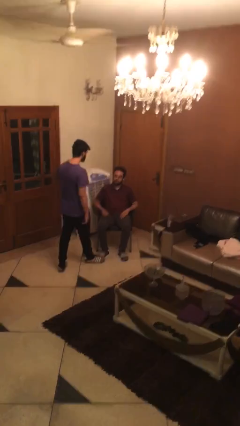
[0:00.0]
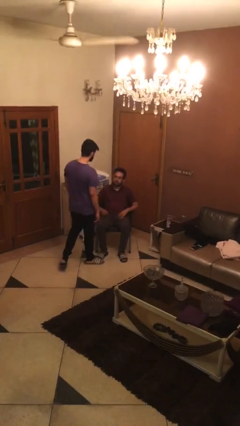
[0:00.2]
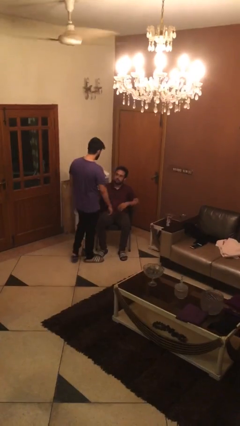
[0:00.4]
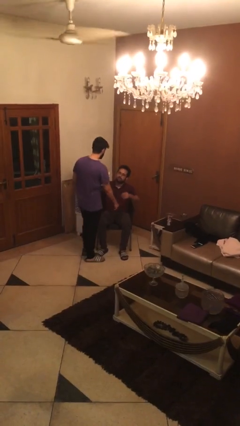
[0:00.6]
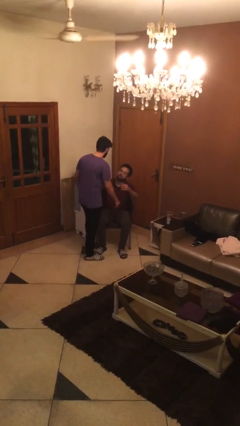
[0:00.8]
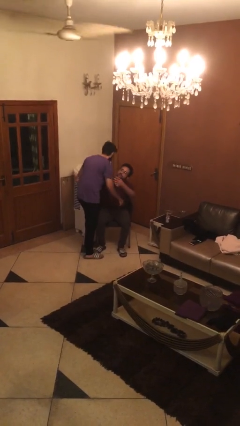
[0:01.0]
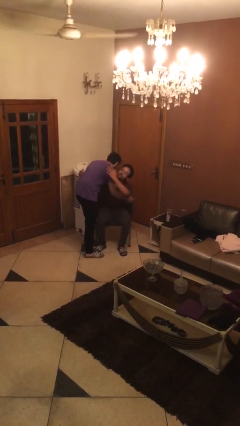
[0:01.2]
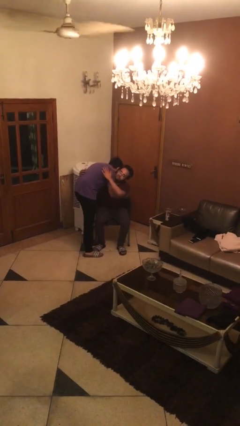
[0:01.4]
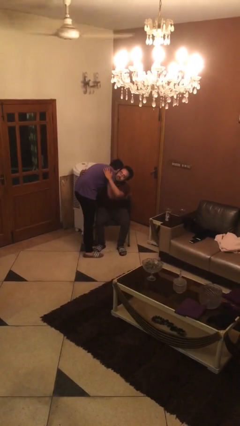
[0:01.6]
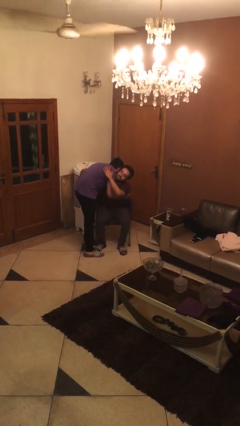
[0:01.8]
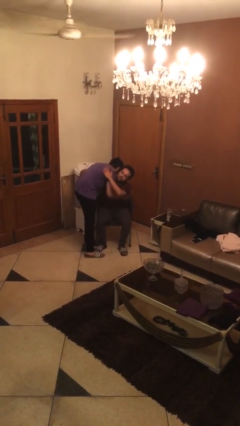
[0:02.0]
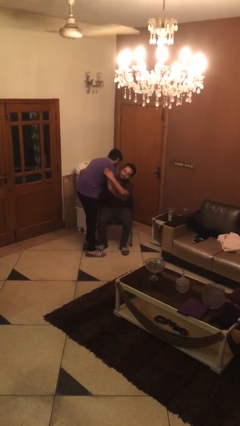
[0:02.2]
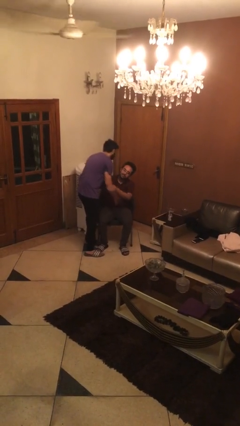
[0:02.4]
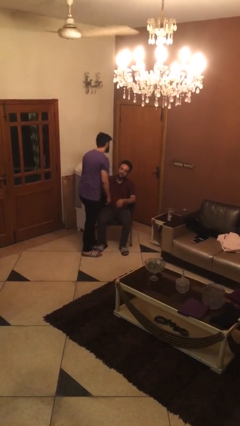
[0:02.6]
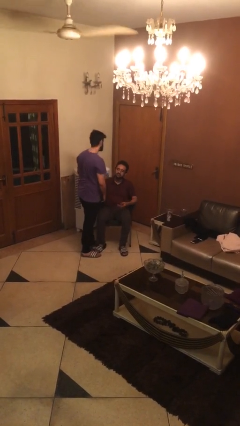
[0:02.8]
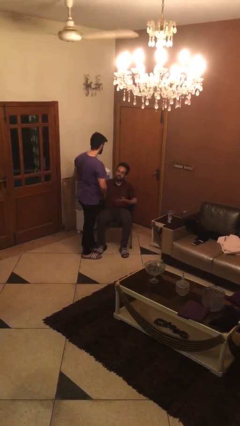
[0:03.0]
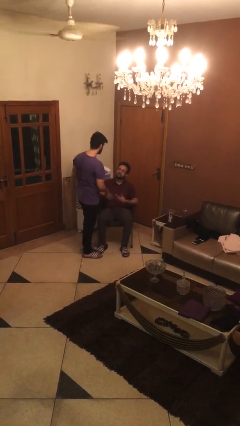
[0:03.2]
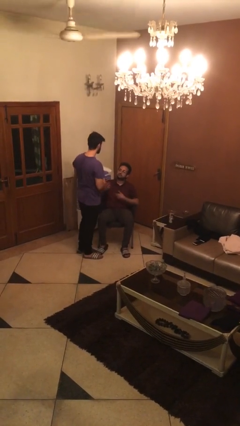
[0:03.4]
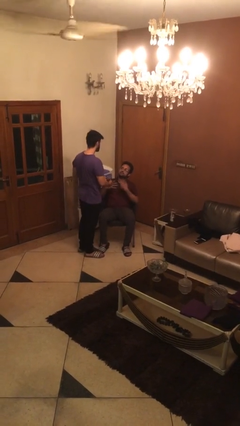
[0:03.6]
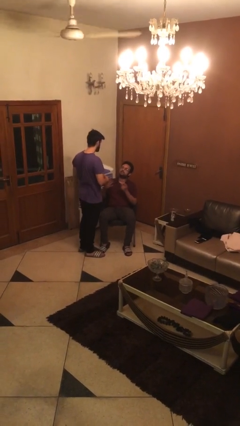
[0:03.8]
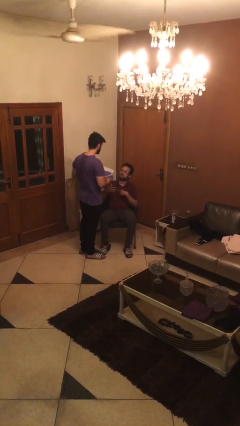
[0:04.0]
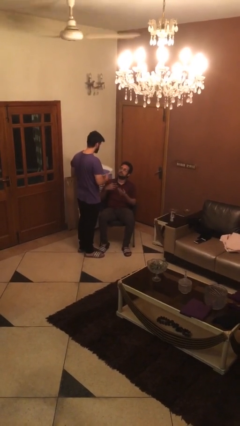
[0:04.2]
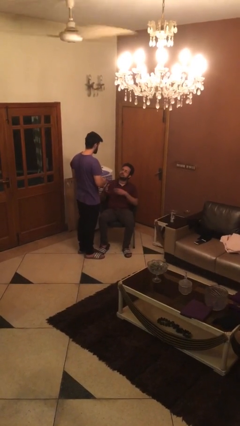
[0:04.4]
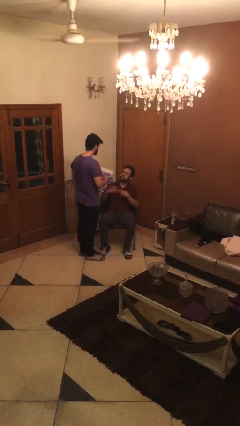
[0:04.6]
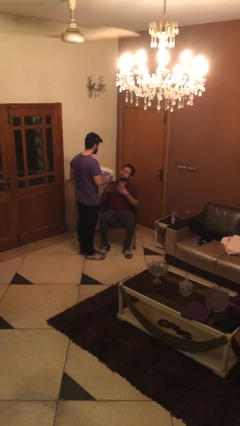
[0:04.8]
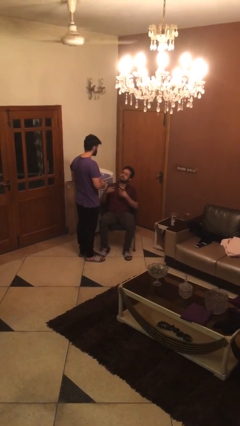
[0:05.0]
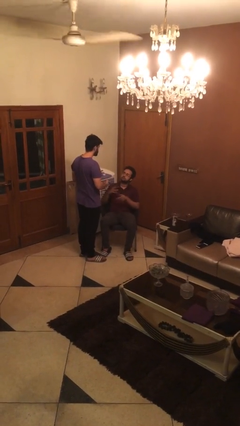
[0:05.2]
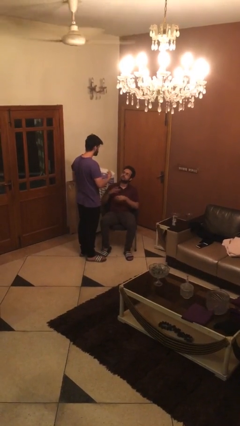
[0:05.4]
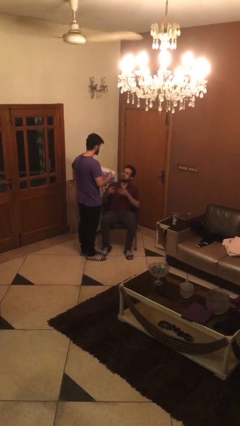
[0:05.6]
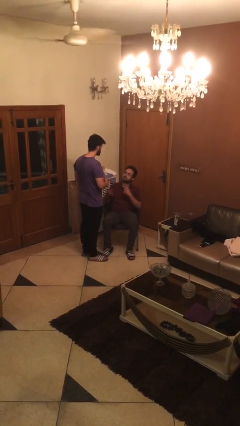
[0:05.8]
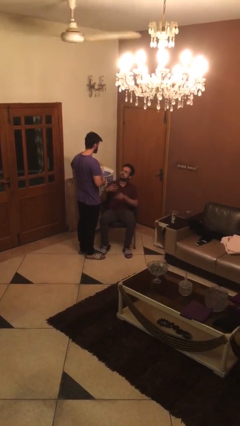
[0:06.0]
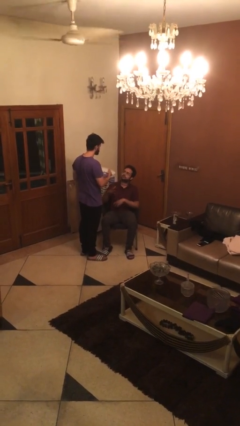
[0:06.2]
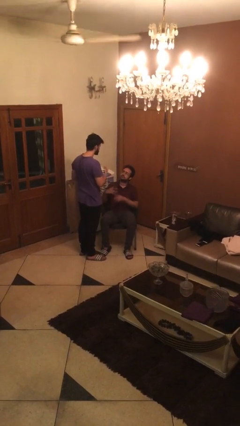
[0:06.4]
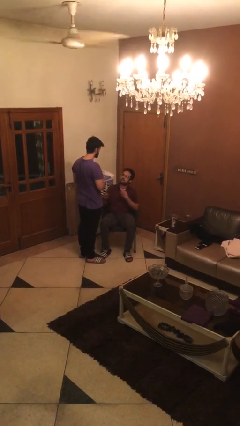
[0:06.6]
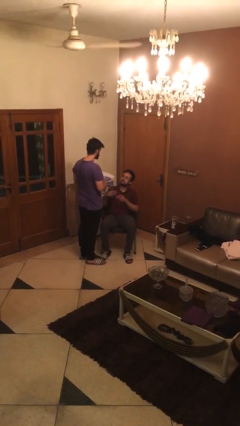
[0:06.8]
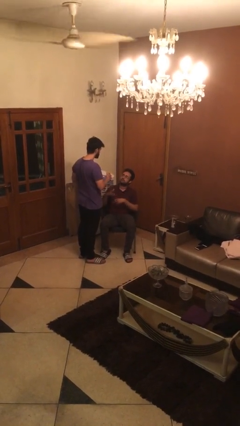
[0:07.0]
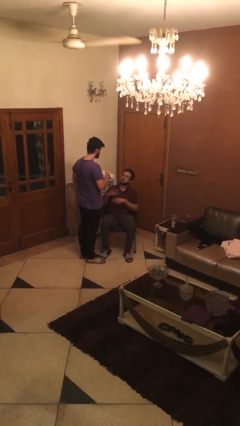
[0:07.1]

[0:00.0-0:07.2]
person embraces person

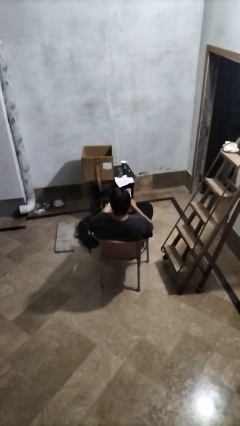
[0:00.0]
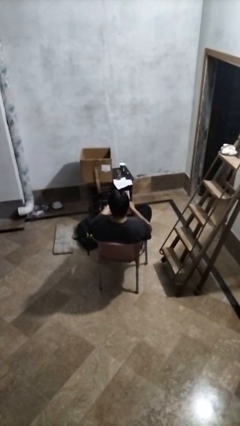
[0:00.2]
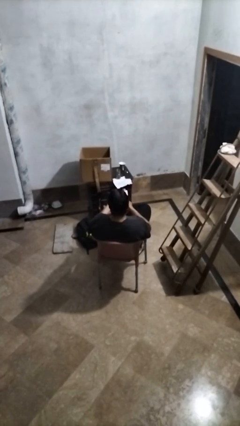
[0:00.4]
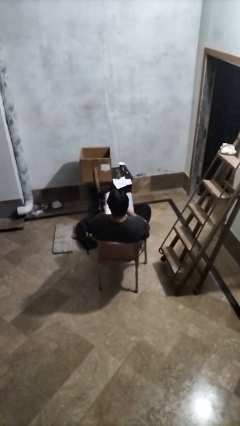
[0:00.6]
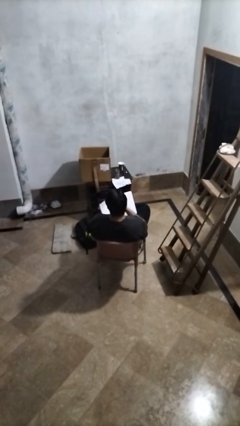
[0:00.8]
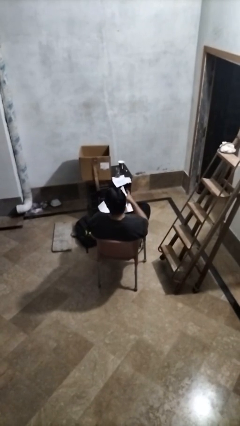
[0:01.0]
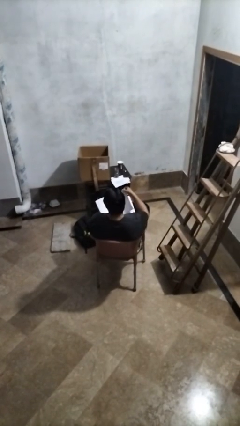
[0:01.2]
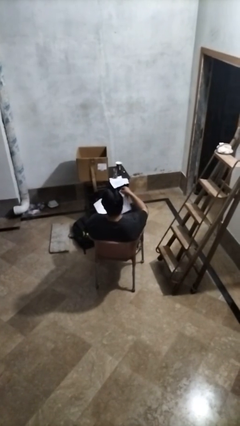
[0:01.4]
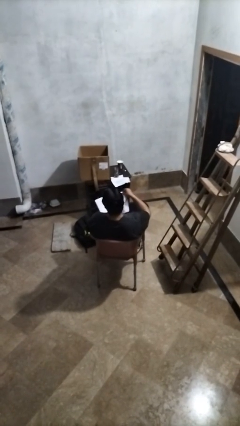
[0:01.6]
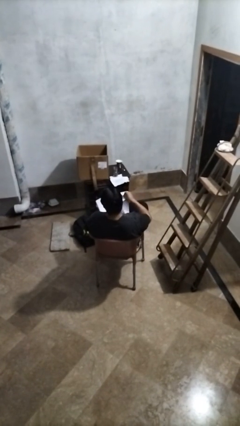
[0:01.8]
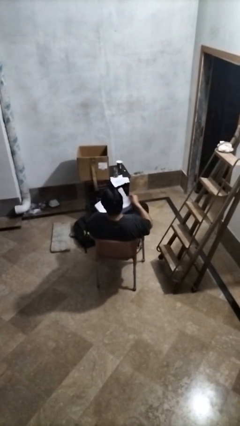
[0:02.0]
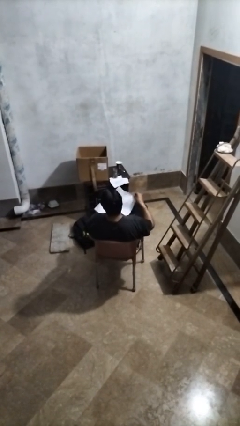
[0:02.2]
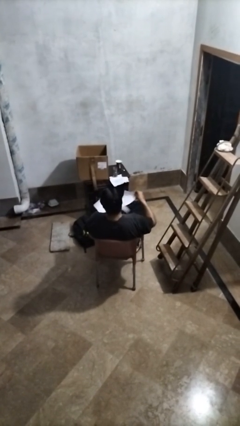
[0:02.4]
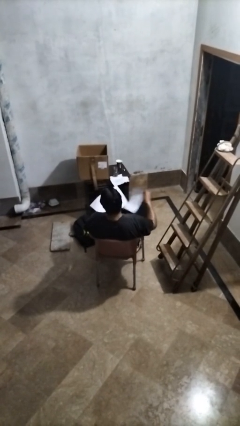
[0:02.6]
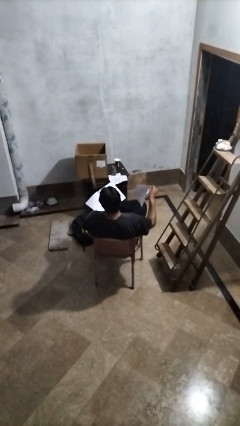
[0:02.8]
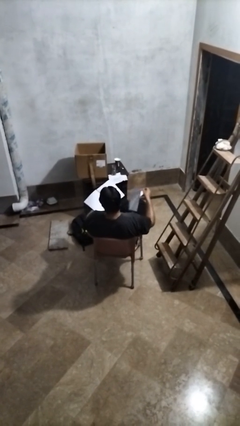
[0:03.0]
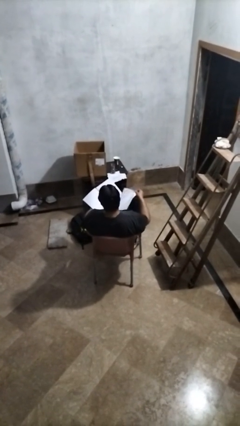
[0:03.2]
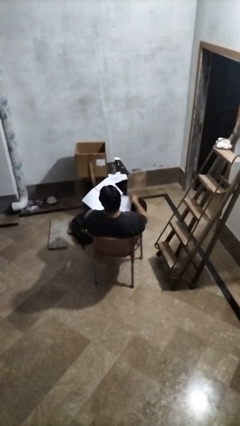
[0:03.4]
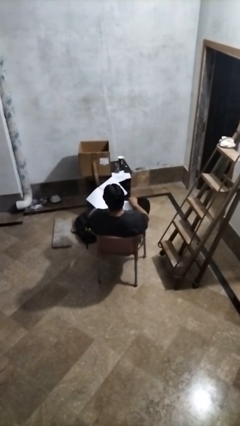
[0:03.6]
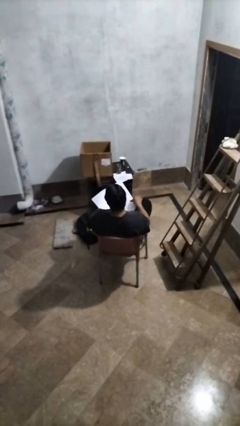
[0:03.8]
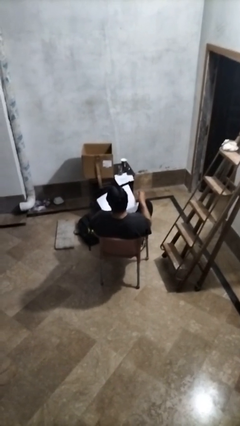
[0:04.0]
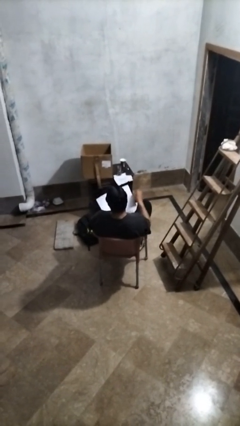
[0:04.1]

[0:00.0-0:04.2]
person tears paper

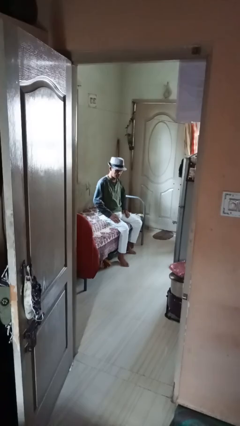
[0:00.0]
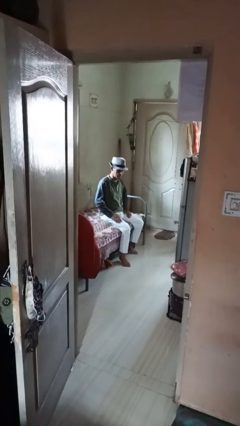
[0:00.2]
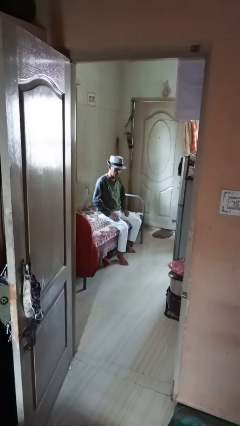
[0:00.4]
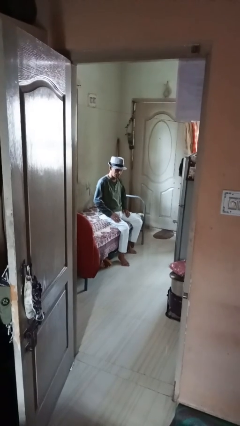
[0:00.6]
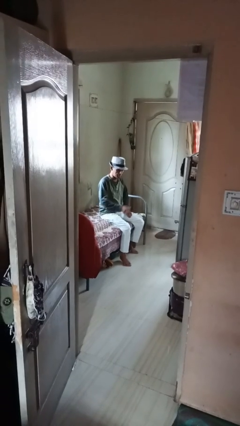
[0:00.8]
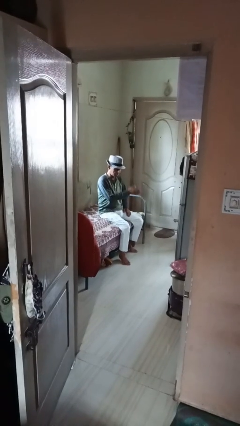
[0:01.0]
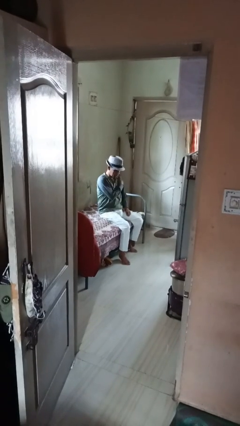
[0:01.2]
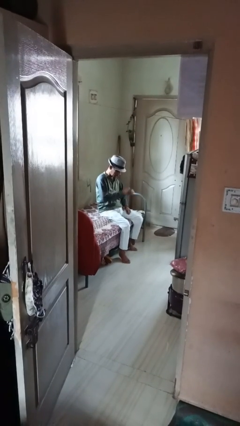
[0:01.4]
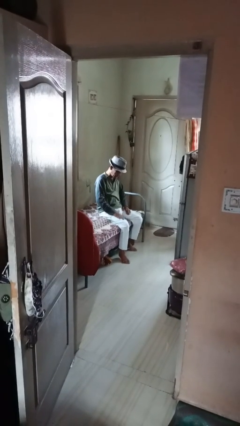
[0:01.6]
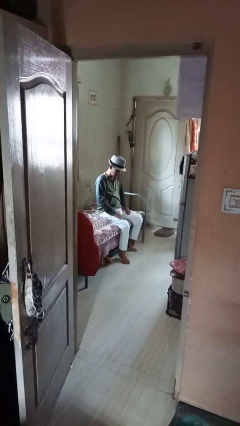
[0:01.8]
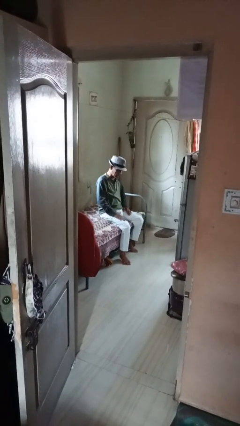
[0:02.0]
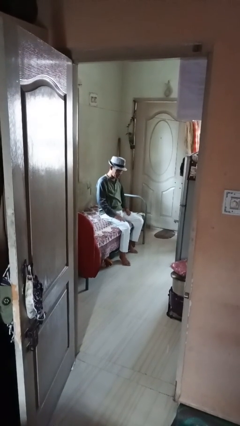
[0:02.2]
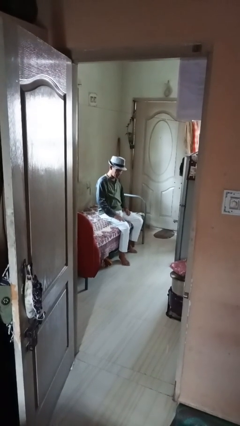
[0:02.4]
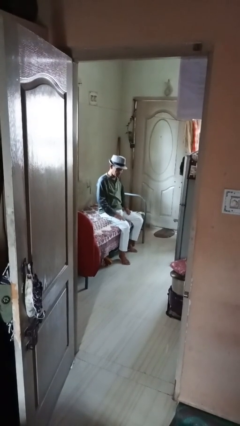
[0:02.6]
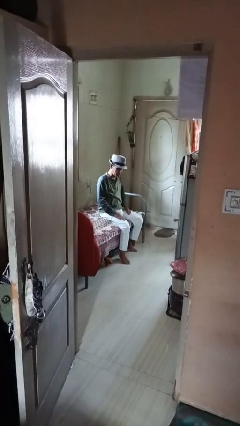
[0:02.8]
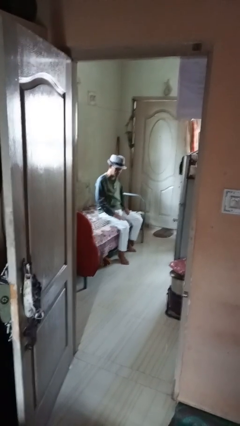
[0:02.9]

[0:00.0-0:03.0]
person swats bug

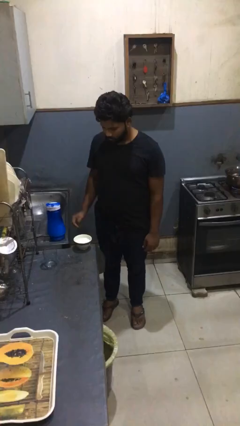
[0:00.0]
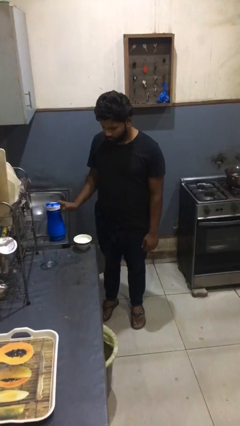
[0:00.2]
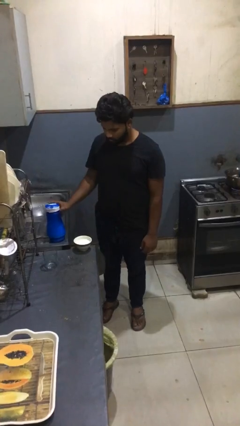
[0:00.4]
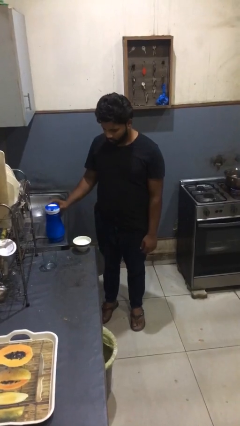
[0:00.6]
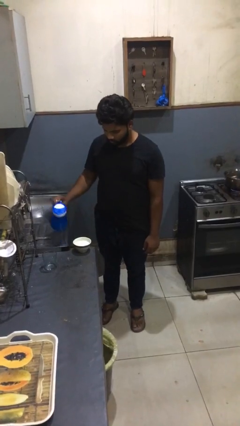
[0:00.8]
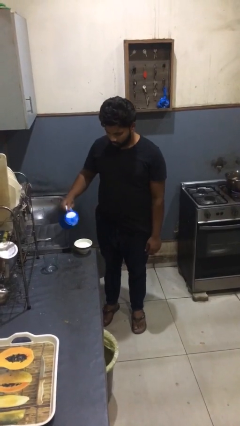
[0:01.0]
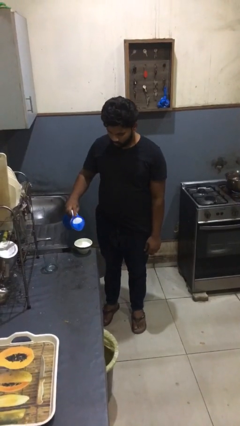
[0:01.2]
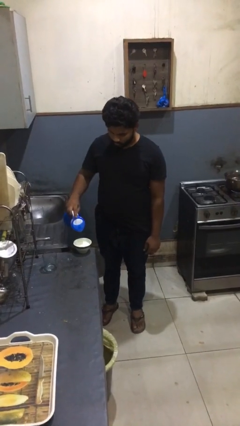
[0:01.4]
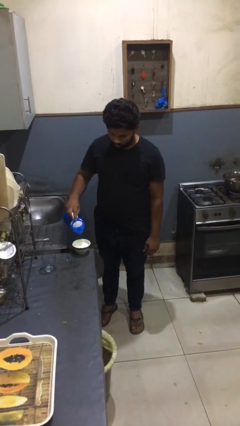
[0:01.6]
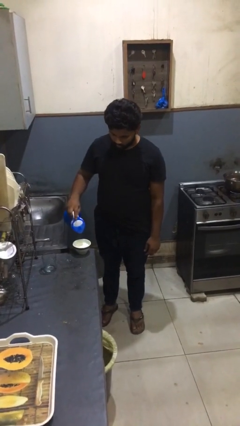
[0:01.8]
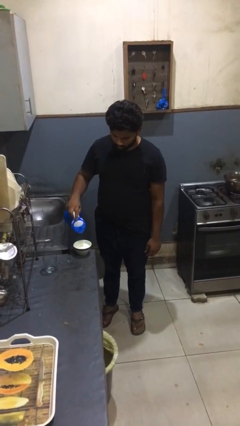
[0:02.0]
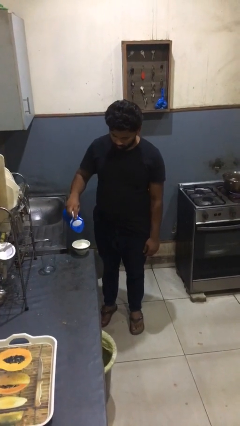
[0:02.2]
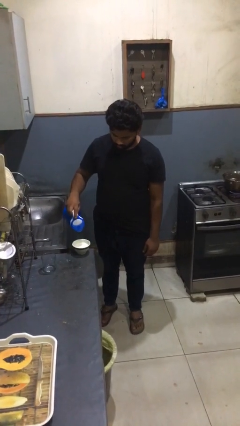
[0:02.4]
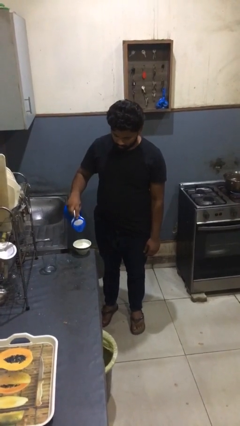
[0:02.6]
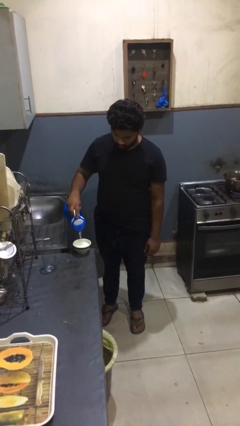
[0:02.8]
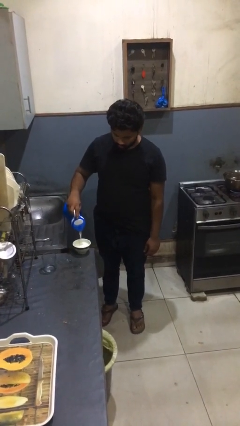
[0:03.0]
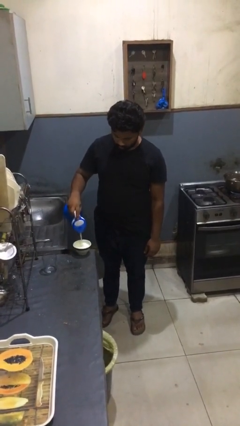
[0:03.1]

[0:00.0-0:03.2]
person pours into bowl

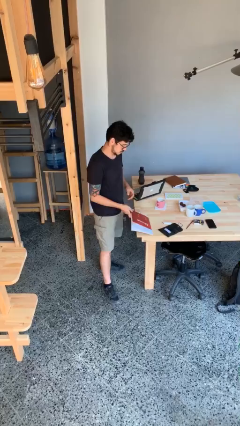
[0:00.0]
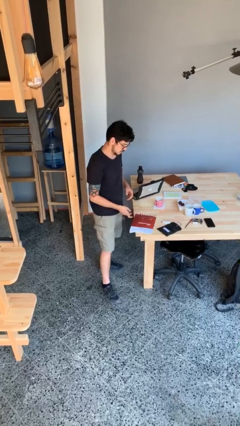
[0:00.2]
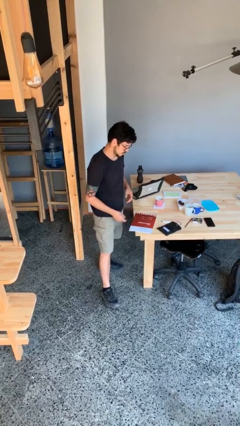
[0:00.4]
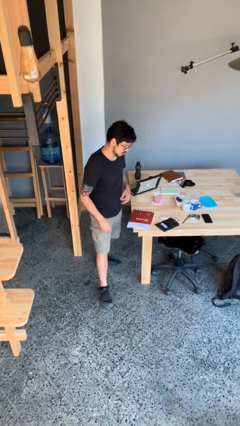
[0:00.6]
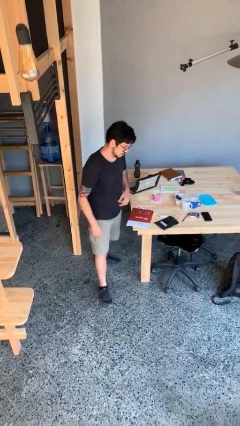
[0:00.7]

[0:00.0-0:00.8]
person puts down object on table
